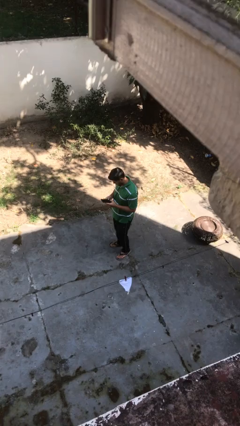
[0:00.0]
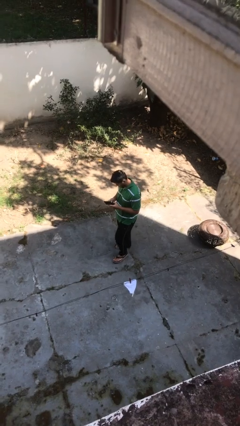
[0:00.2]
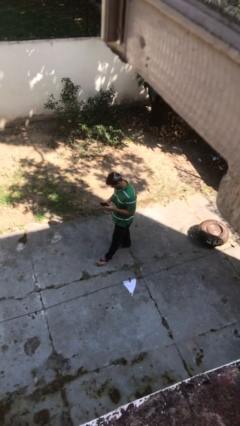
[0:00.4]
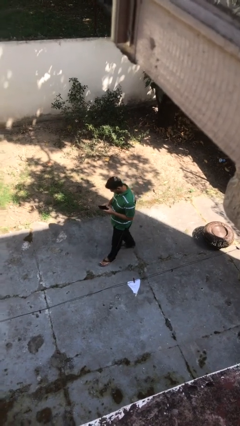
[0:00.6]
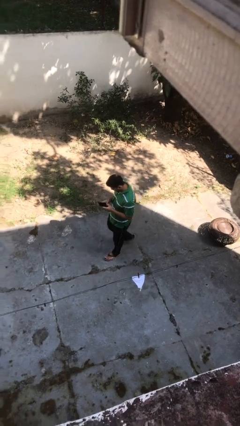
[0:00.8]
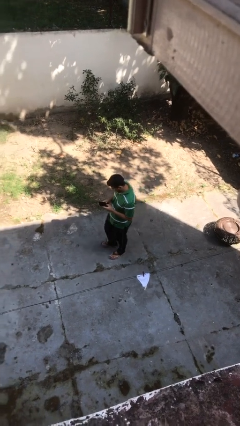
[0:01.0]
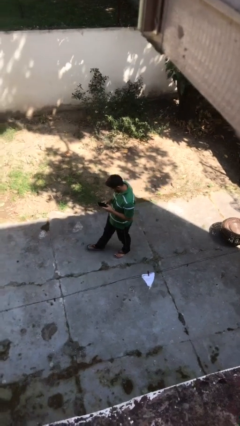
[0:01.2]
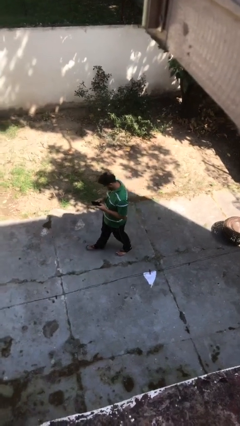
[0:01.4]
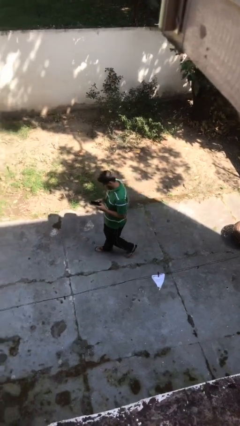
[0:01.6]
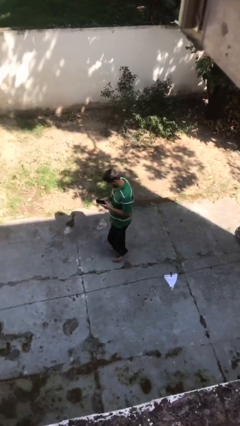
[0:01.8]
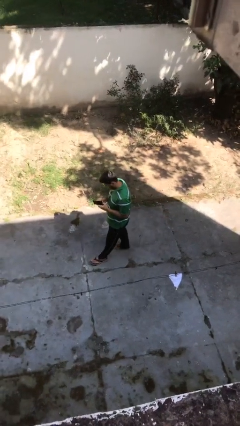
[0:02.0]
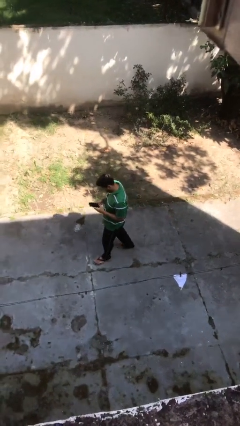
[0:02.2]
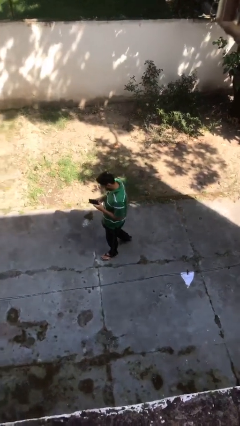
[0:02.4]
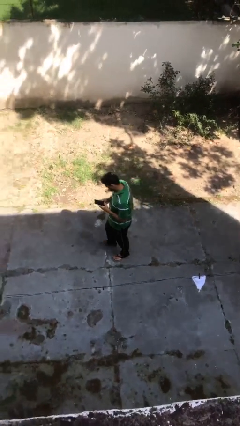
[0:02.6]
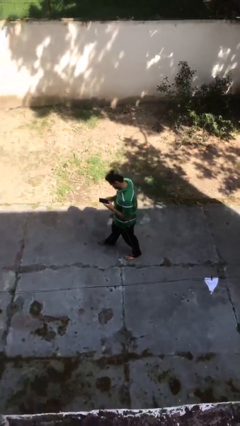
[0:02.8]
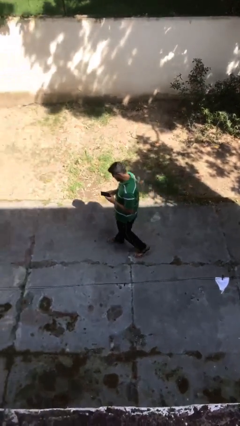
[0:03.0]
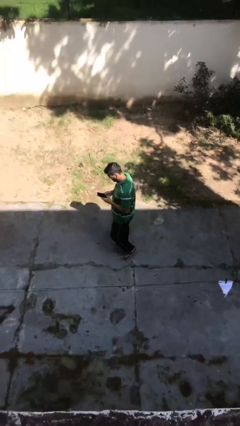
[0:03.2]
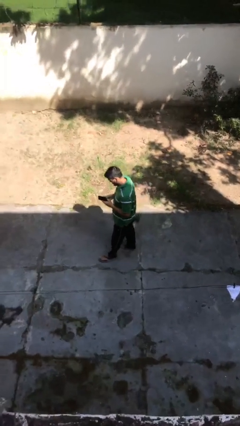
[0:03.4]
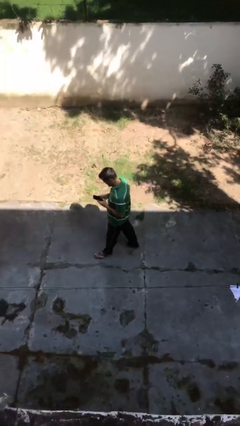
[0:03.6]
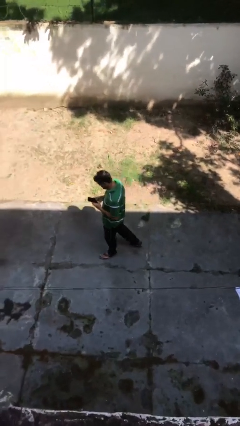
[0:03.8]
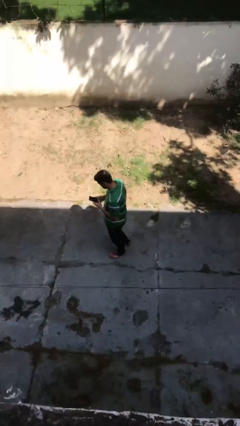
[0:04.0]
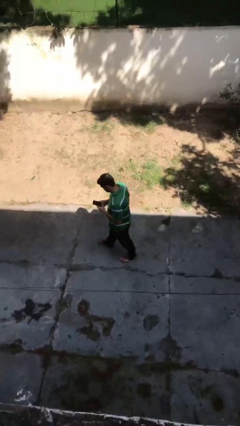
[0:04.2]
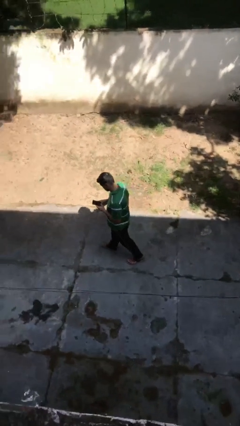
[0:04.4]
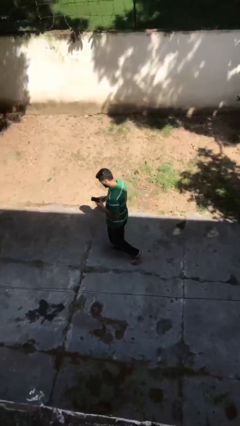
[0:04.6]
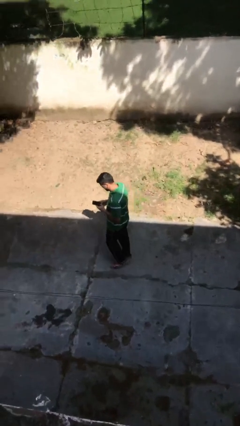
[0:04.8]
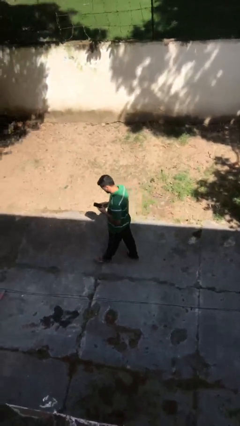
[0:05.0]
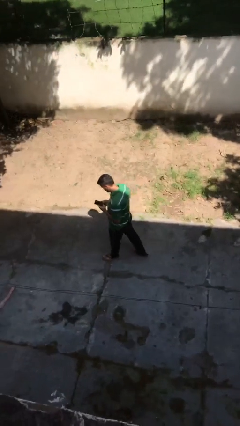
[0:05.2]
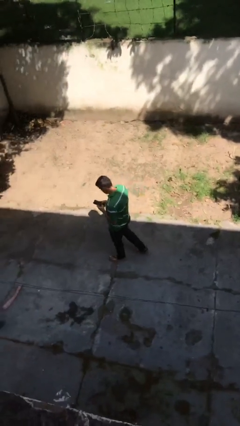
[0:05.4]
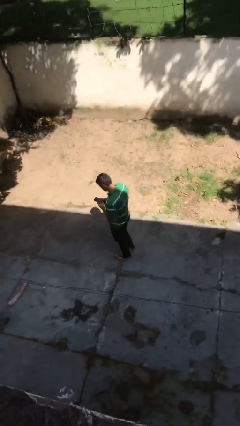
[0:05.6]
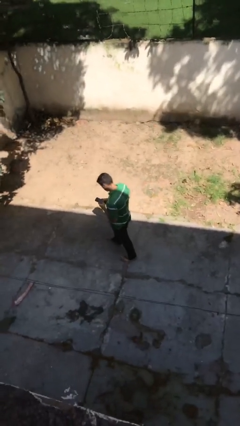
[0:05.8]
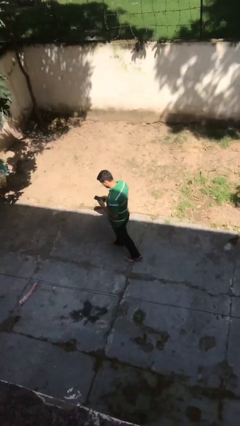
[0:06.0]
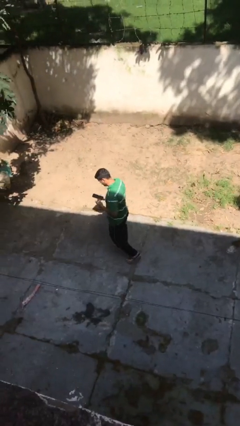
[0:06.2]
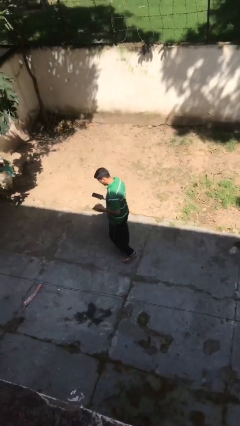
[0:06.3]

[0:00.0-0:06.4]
person texts on phone

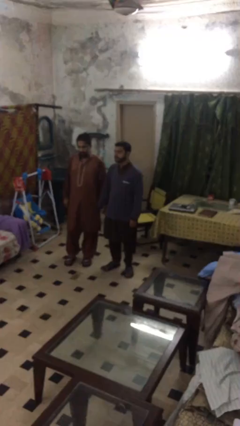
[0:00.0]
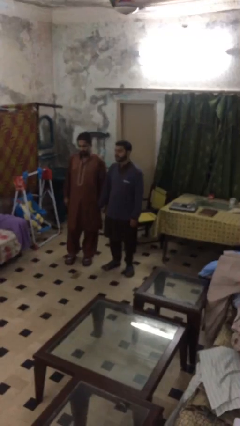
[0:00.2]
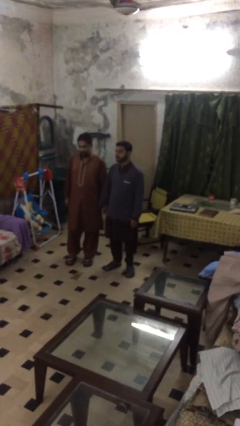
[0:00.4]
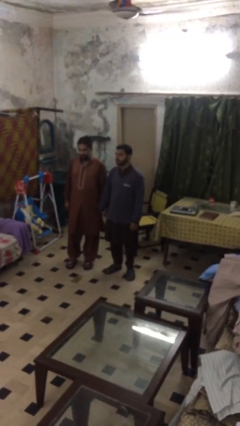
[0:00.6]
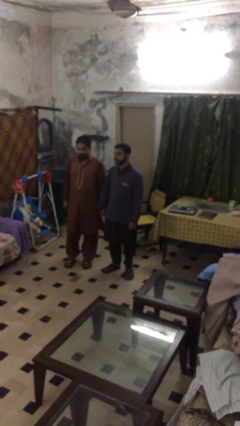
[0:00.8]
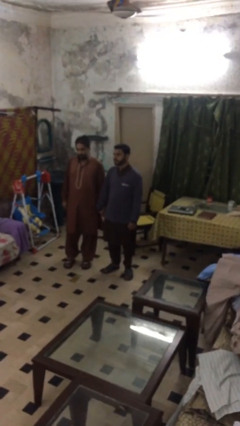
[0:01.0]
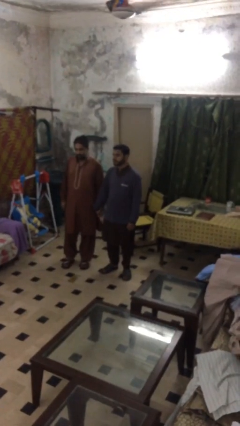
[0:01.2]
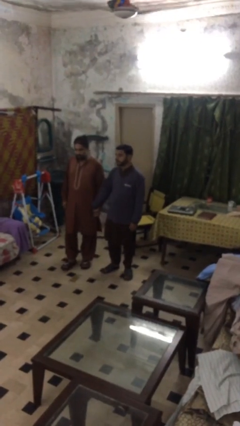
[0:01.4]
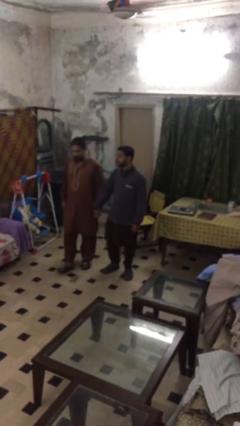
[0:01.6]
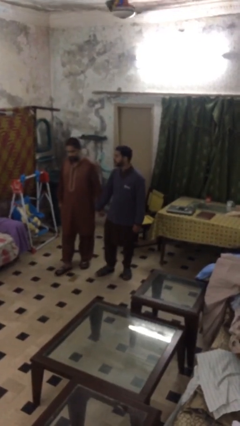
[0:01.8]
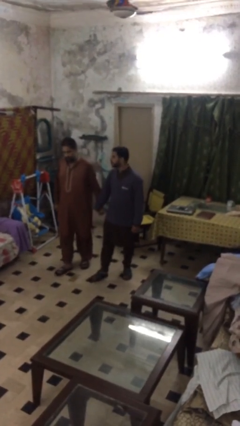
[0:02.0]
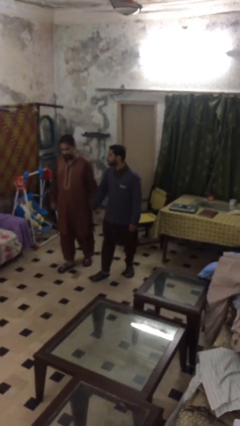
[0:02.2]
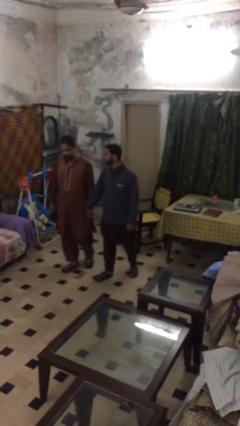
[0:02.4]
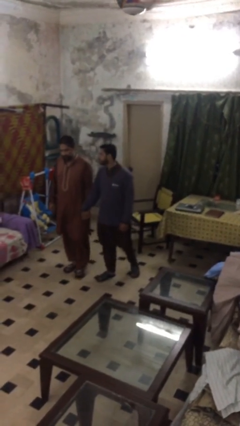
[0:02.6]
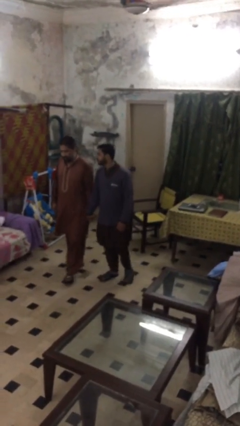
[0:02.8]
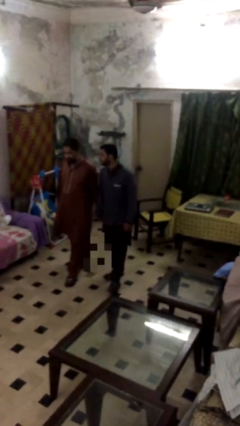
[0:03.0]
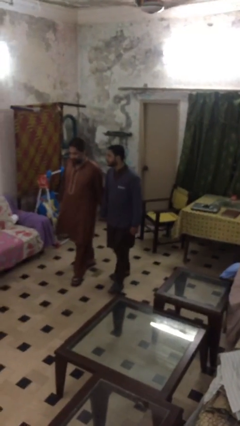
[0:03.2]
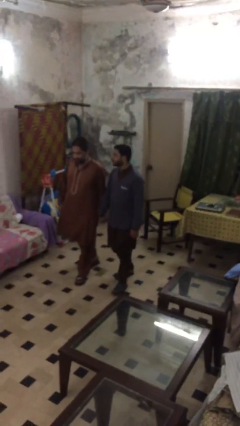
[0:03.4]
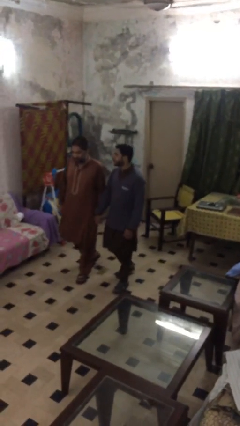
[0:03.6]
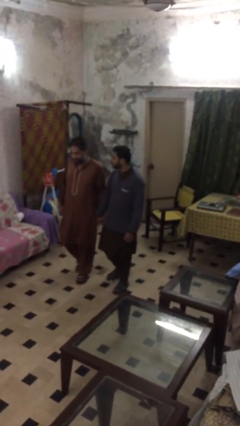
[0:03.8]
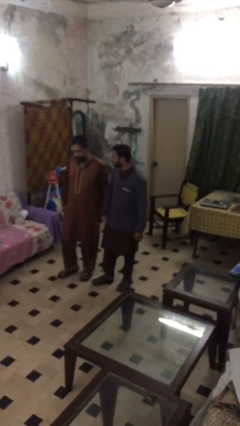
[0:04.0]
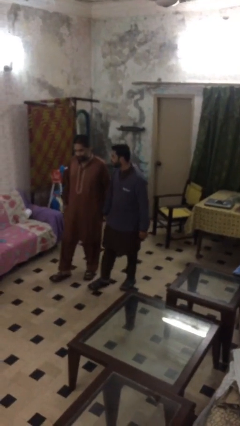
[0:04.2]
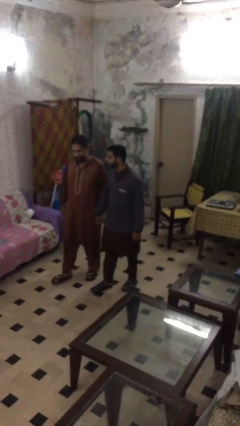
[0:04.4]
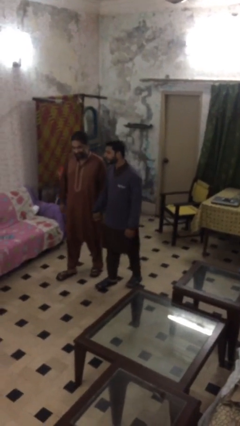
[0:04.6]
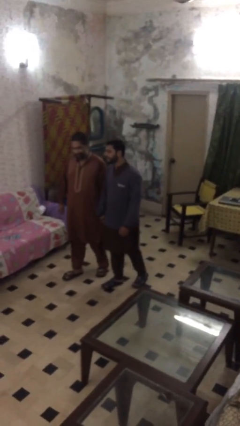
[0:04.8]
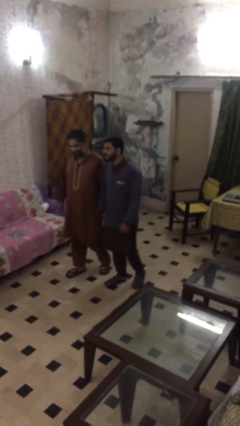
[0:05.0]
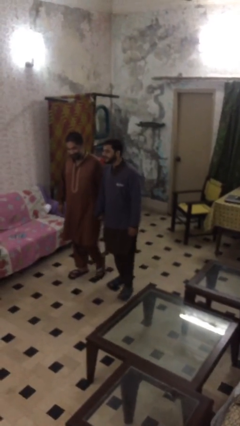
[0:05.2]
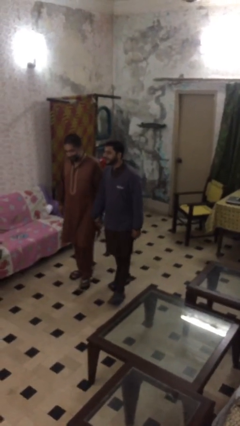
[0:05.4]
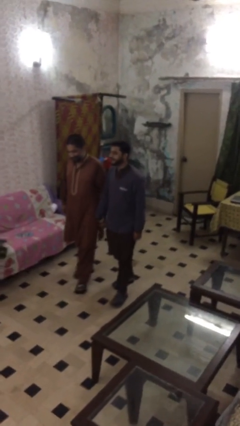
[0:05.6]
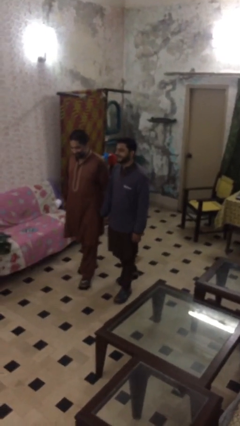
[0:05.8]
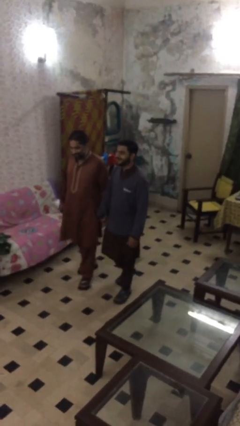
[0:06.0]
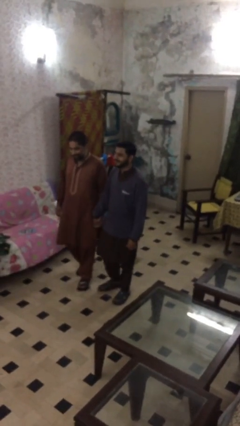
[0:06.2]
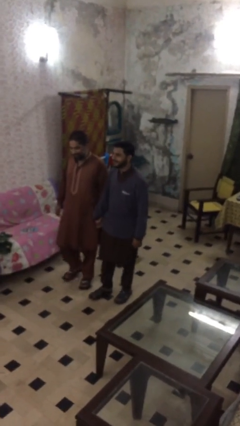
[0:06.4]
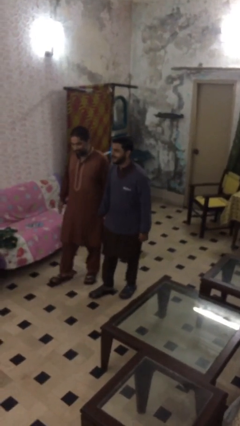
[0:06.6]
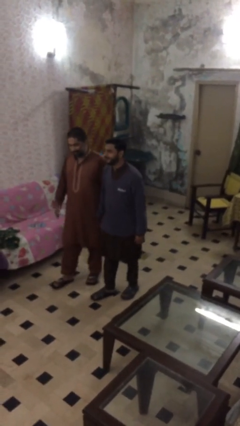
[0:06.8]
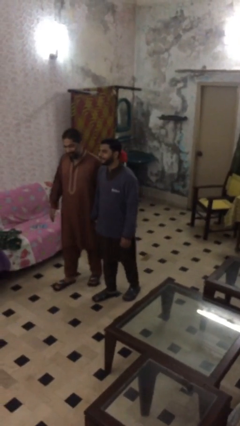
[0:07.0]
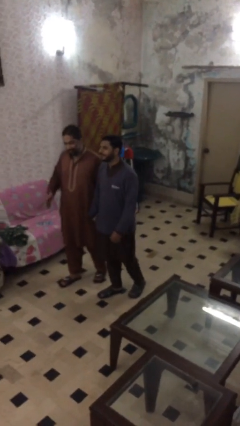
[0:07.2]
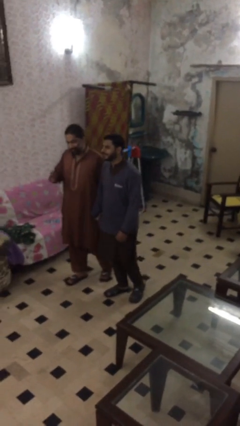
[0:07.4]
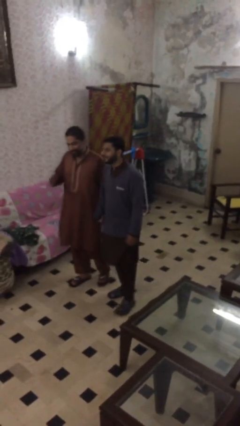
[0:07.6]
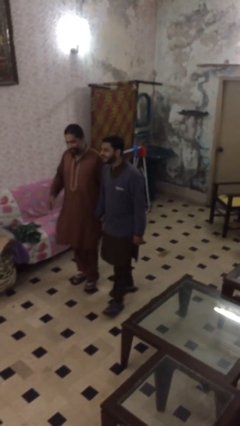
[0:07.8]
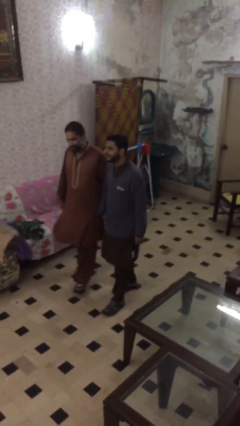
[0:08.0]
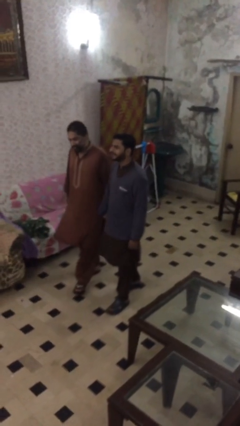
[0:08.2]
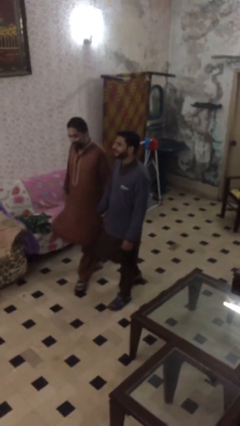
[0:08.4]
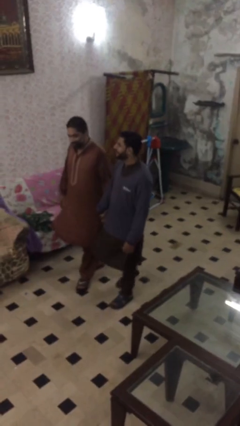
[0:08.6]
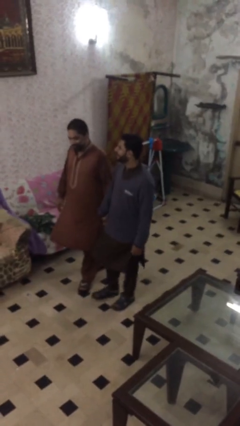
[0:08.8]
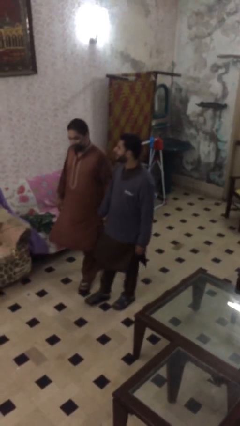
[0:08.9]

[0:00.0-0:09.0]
person holds hand

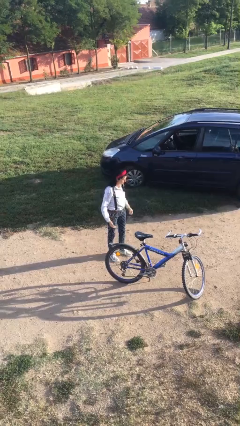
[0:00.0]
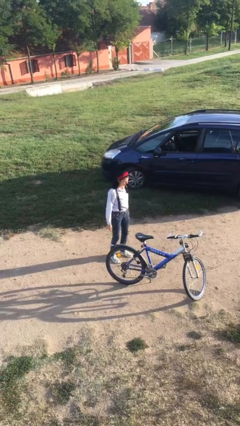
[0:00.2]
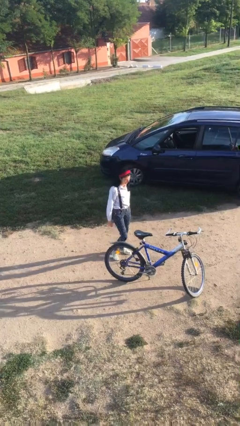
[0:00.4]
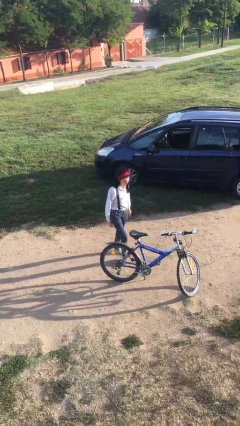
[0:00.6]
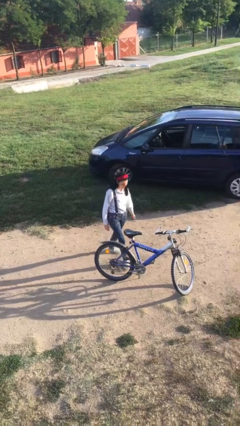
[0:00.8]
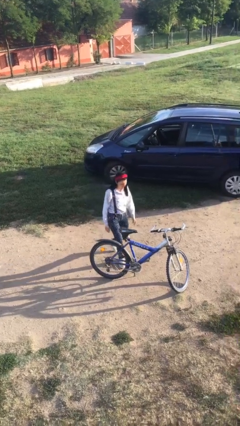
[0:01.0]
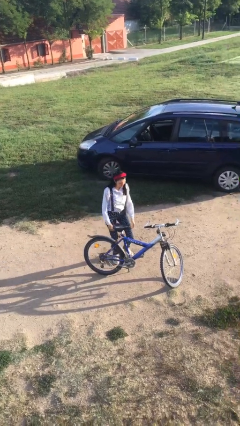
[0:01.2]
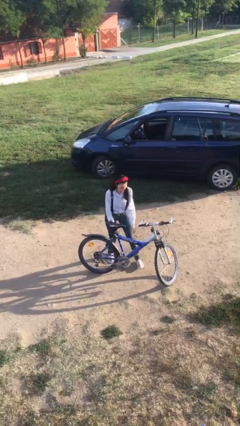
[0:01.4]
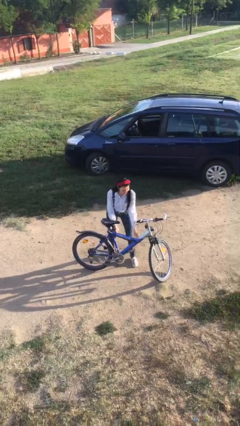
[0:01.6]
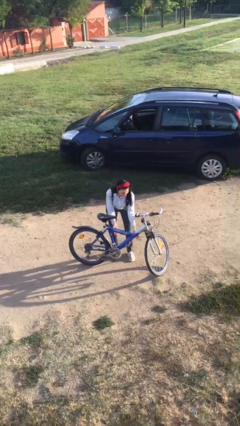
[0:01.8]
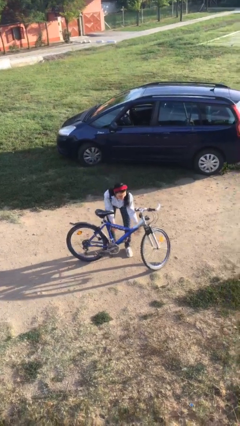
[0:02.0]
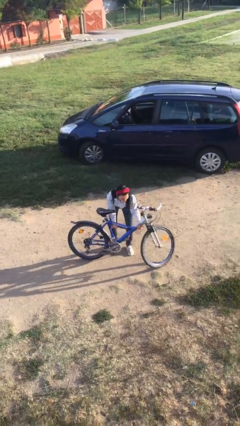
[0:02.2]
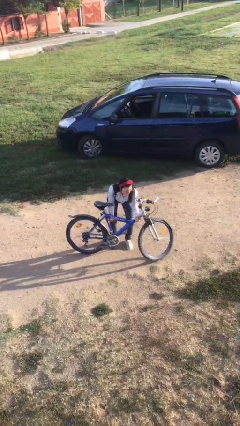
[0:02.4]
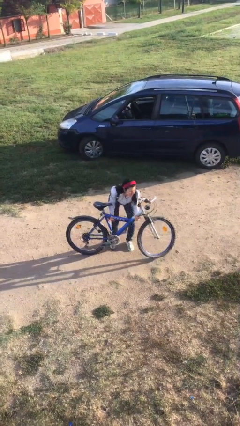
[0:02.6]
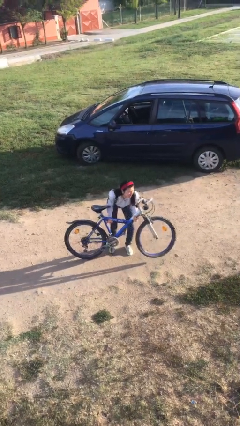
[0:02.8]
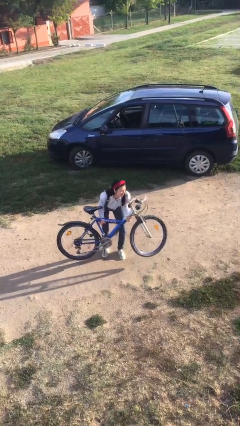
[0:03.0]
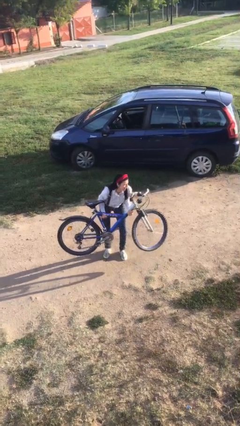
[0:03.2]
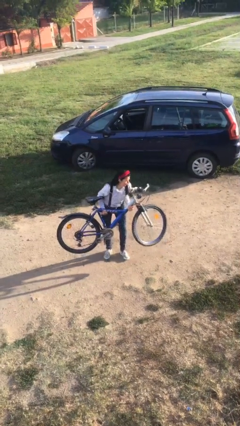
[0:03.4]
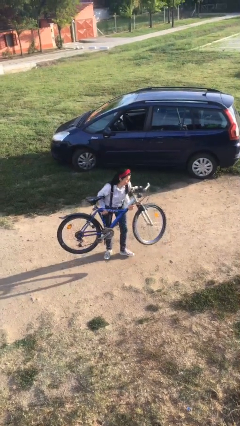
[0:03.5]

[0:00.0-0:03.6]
person picks up object from floor
